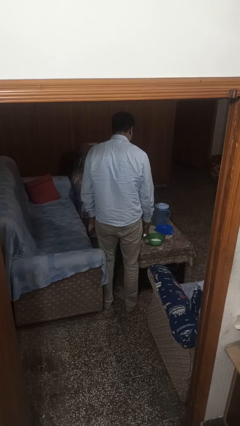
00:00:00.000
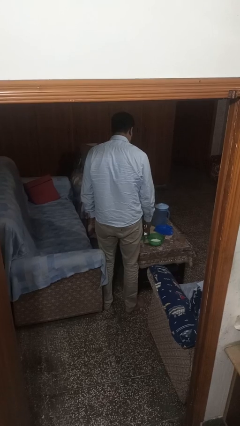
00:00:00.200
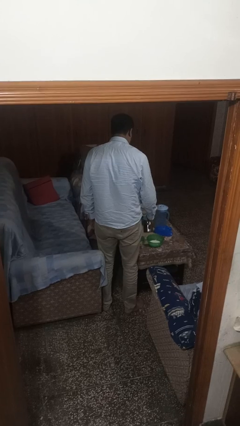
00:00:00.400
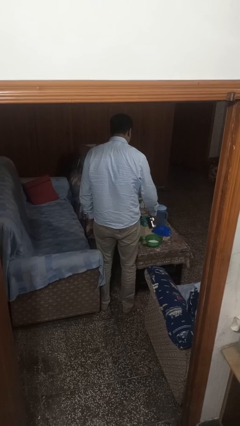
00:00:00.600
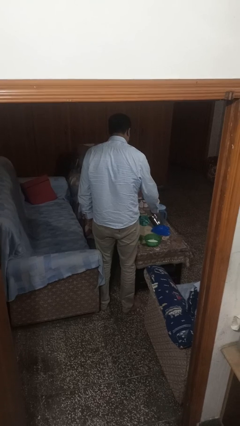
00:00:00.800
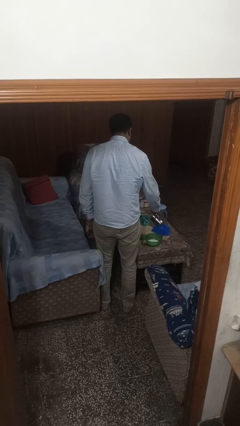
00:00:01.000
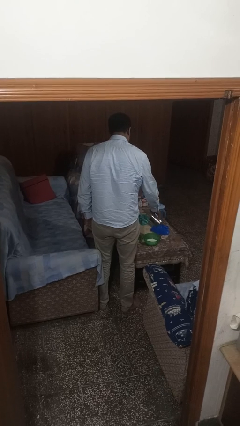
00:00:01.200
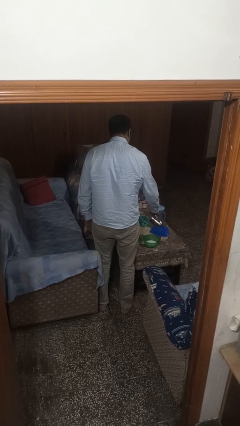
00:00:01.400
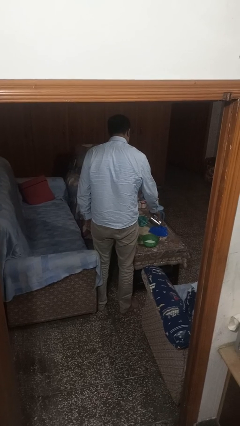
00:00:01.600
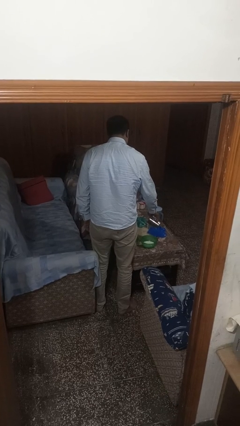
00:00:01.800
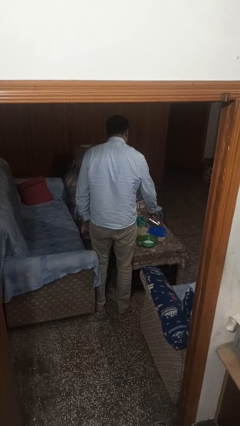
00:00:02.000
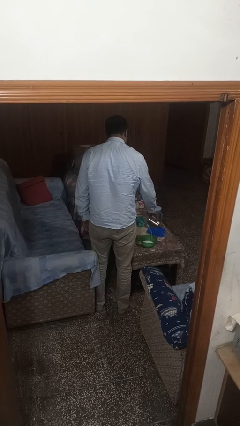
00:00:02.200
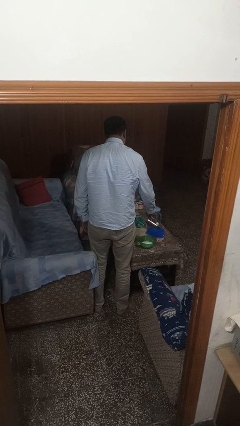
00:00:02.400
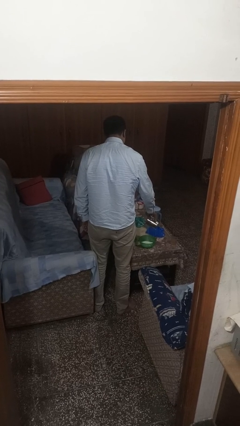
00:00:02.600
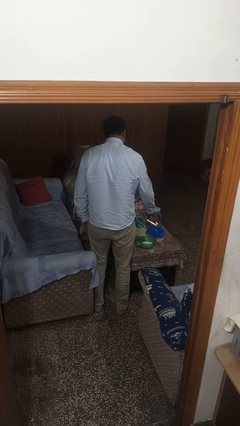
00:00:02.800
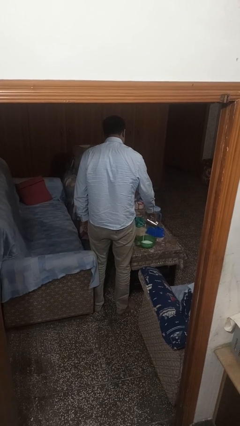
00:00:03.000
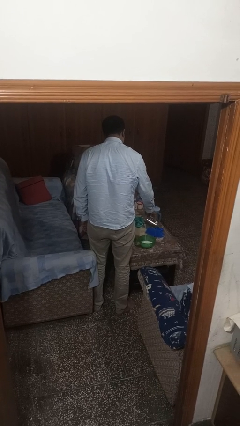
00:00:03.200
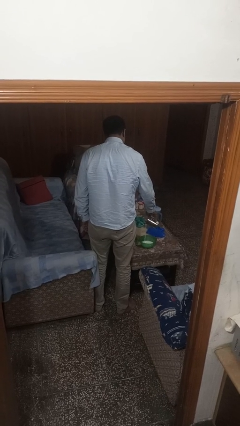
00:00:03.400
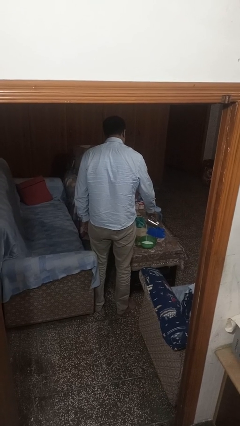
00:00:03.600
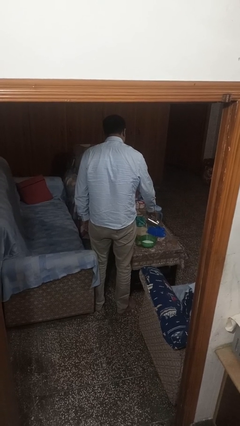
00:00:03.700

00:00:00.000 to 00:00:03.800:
person pours into bowl

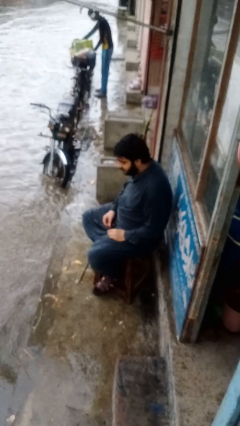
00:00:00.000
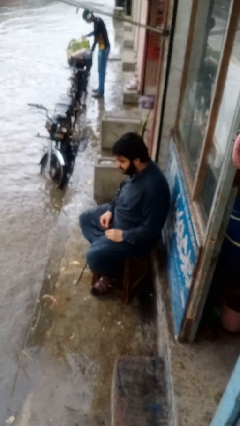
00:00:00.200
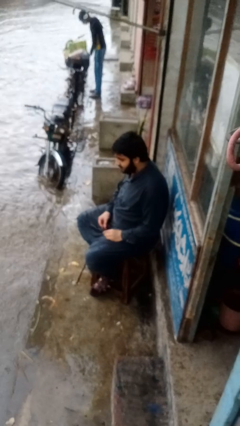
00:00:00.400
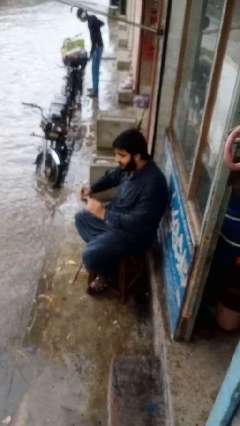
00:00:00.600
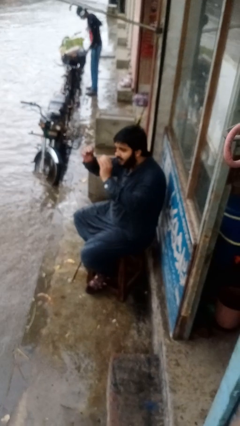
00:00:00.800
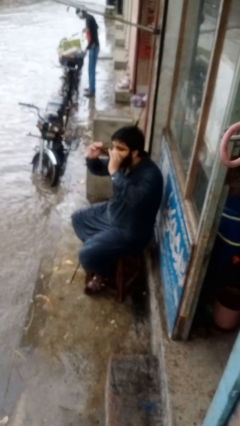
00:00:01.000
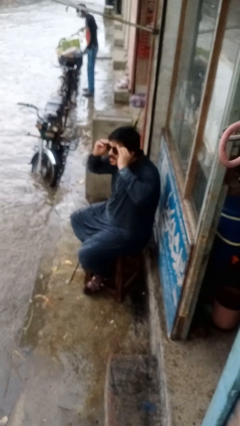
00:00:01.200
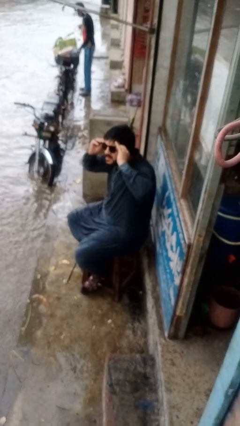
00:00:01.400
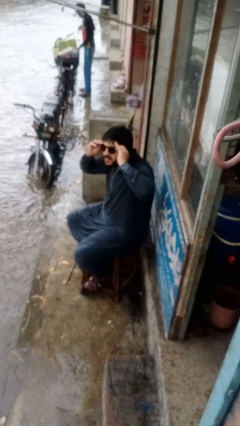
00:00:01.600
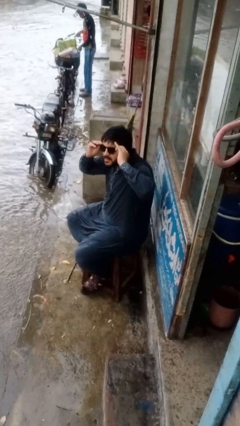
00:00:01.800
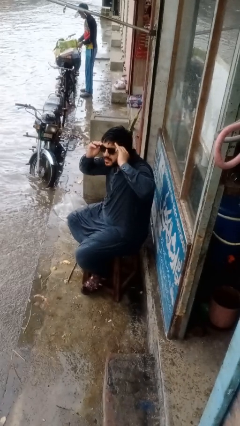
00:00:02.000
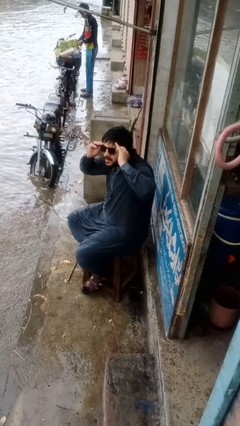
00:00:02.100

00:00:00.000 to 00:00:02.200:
person puts on glasses

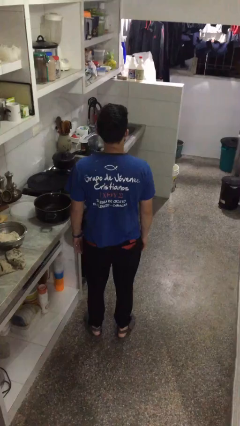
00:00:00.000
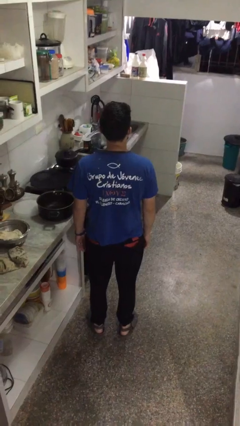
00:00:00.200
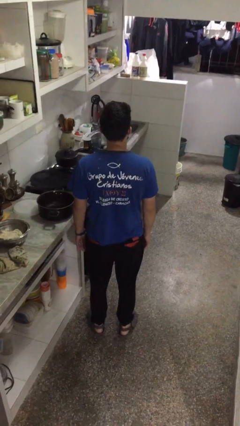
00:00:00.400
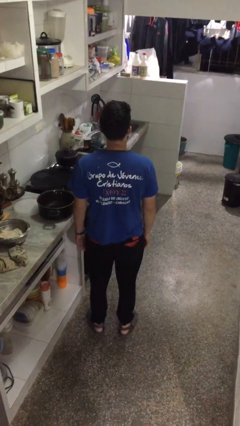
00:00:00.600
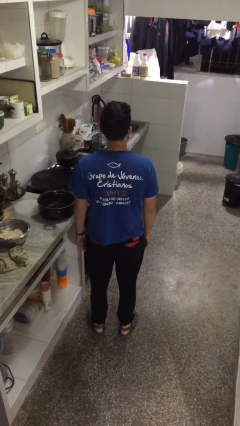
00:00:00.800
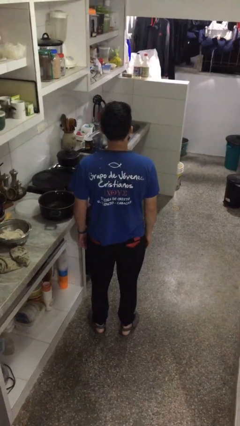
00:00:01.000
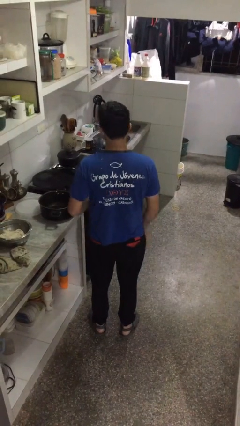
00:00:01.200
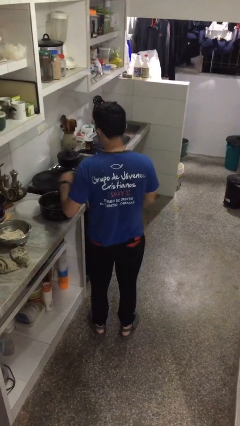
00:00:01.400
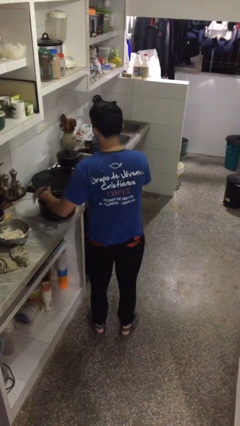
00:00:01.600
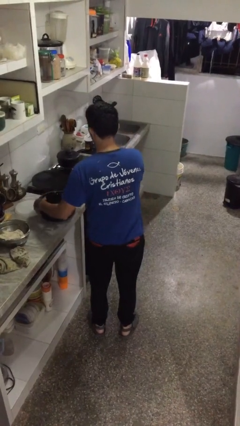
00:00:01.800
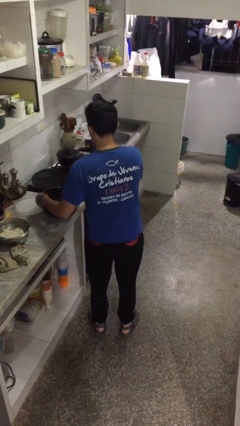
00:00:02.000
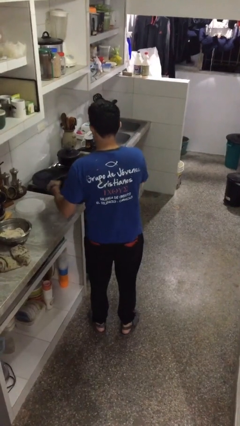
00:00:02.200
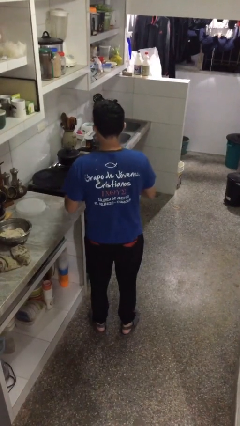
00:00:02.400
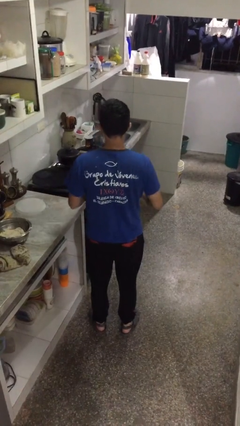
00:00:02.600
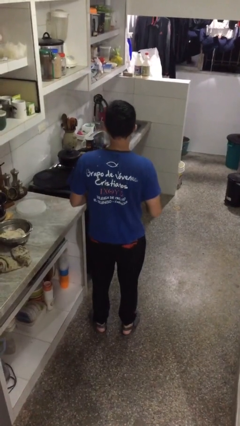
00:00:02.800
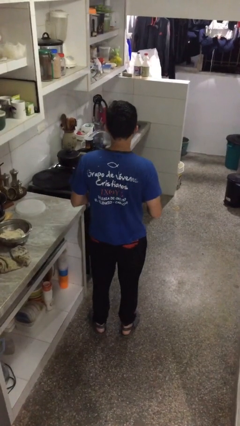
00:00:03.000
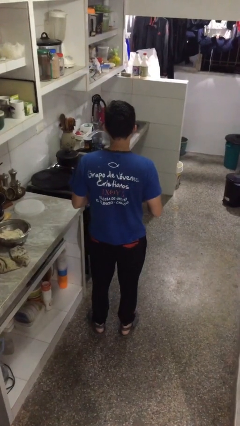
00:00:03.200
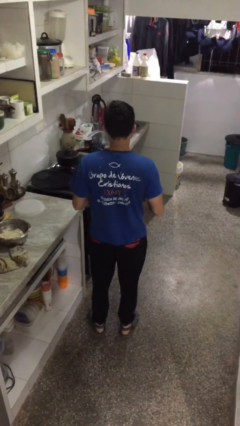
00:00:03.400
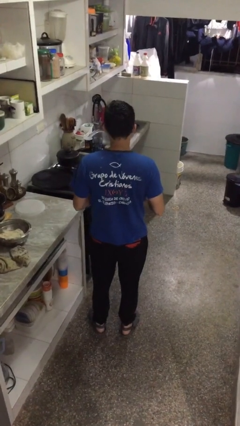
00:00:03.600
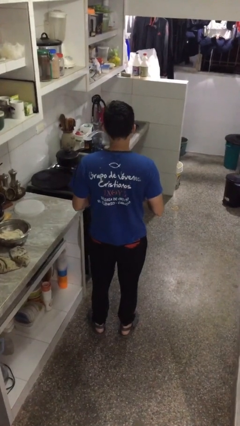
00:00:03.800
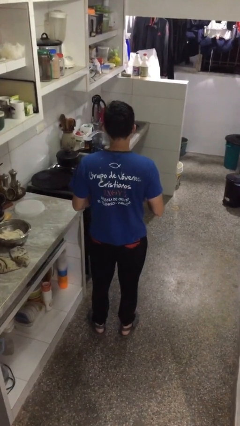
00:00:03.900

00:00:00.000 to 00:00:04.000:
person picks up object from countertop

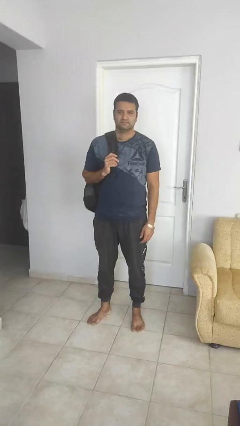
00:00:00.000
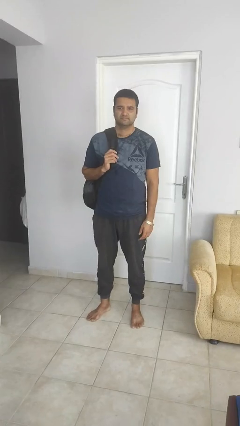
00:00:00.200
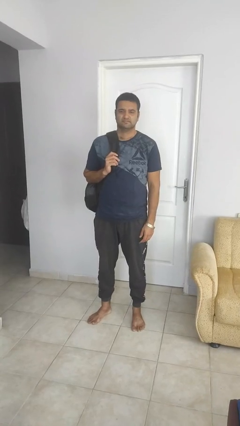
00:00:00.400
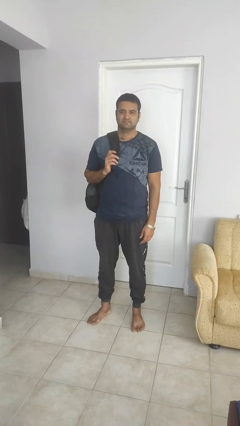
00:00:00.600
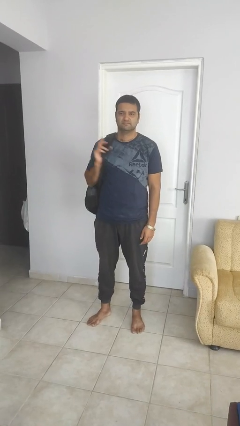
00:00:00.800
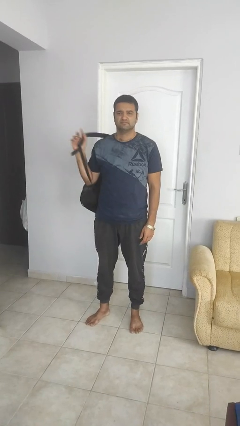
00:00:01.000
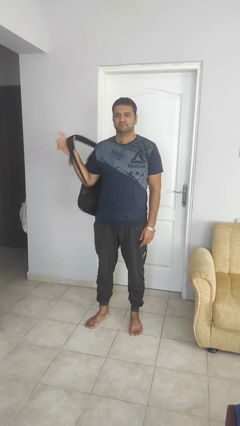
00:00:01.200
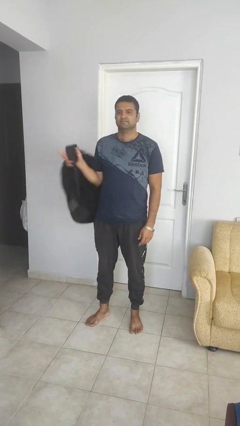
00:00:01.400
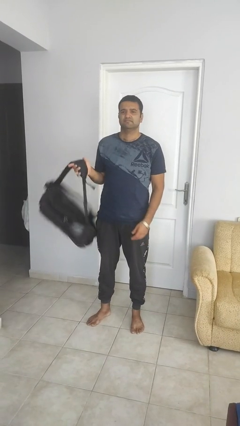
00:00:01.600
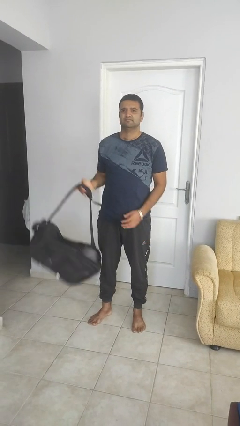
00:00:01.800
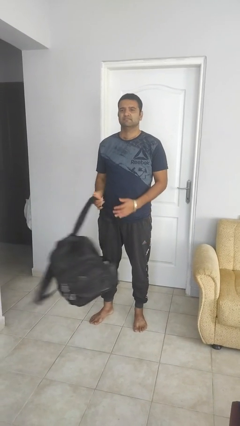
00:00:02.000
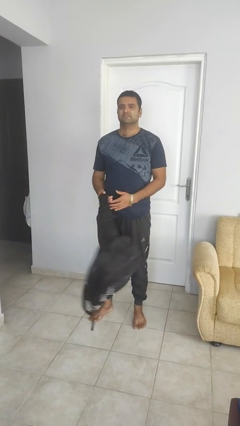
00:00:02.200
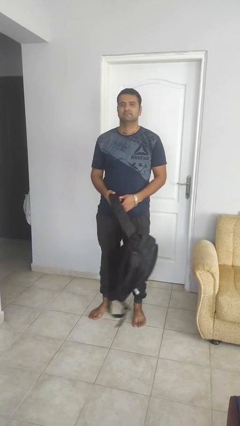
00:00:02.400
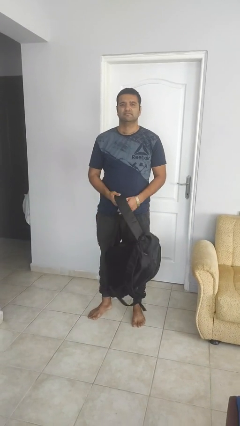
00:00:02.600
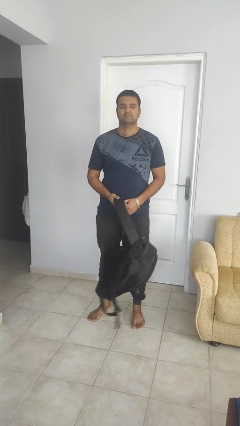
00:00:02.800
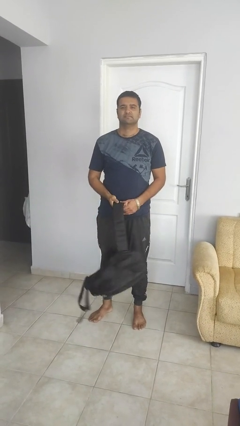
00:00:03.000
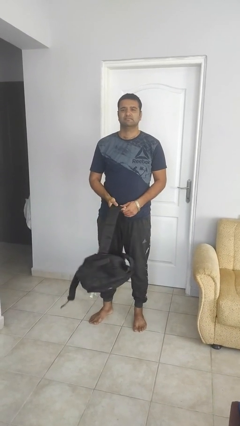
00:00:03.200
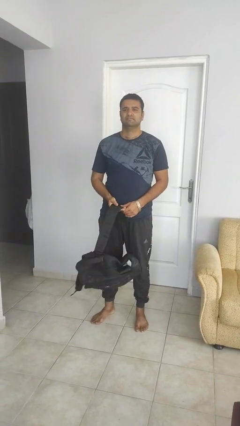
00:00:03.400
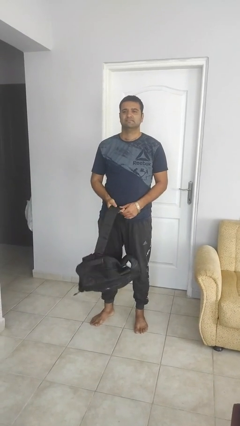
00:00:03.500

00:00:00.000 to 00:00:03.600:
person takes off backpack

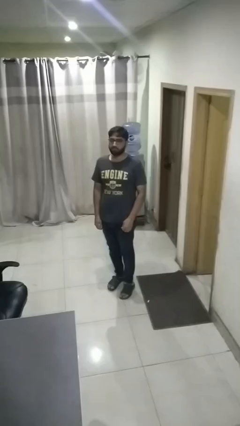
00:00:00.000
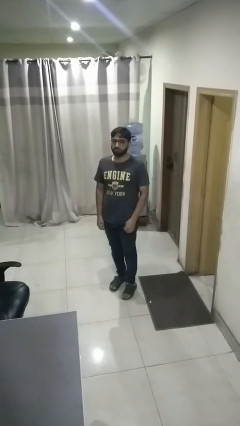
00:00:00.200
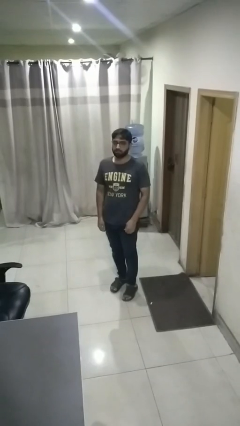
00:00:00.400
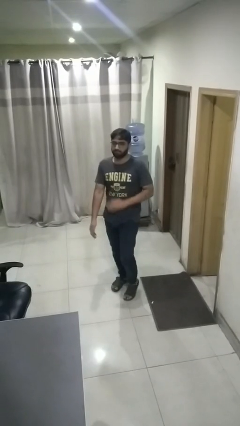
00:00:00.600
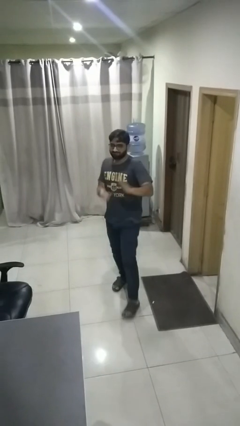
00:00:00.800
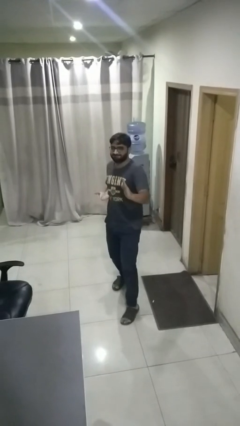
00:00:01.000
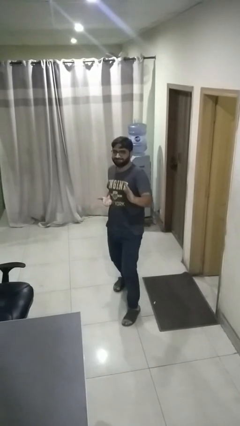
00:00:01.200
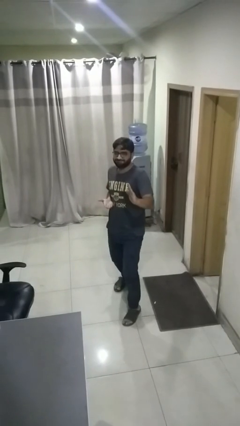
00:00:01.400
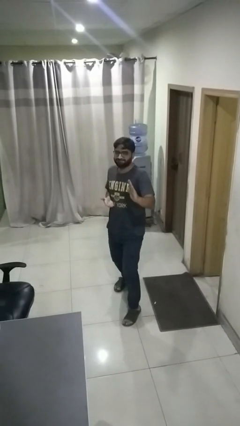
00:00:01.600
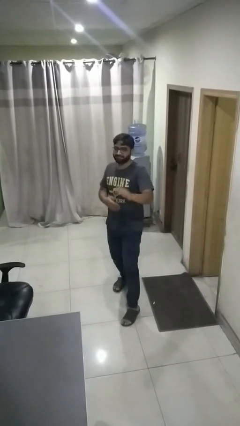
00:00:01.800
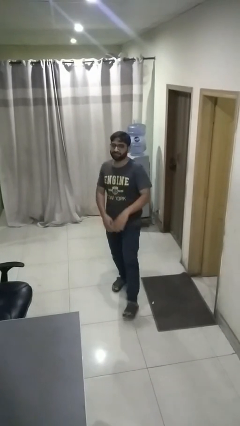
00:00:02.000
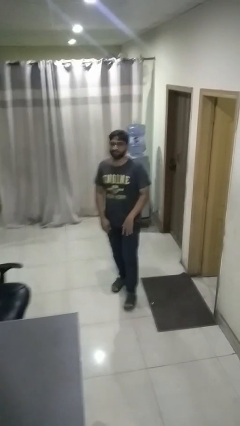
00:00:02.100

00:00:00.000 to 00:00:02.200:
person karate chop

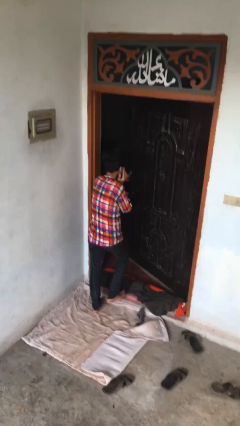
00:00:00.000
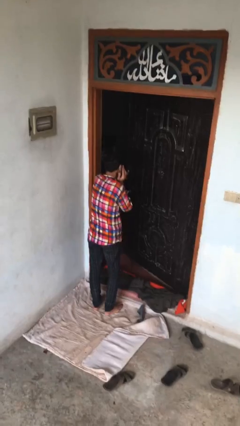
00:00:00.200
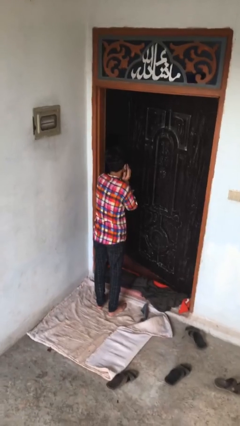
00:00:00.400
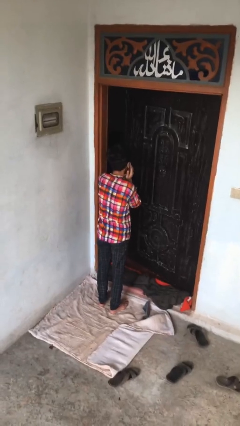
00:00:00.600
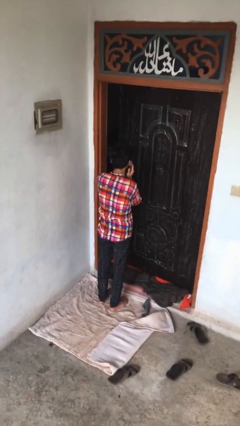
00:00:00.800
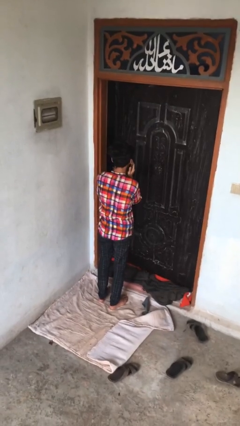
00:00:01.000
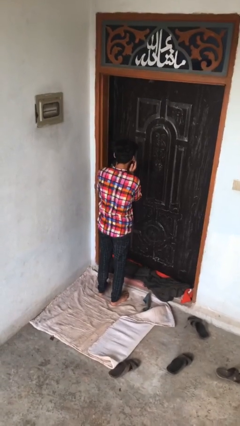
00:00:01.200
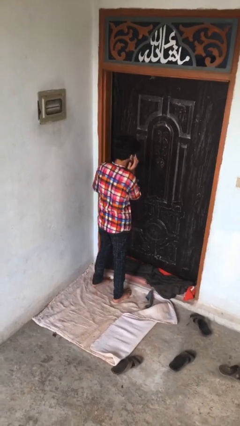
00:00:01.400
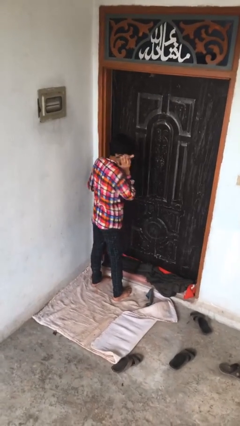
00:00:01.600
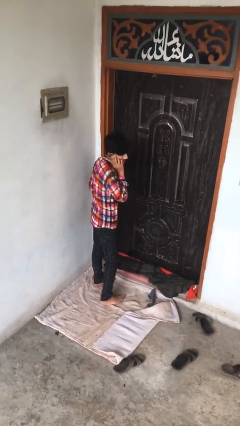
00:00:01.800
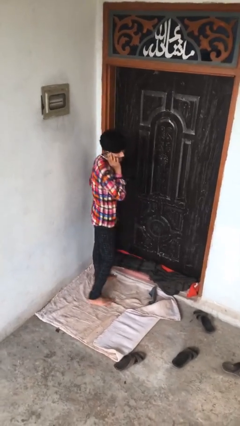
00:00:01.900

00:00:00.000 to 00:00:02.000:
person closes facility door
